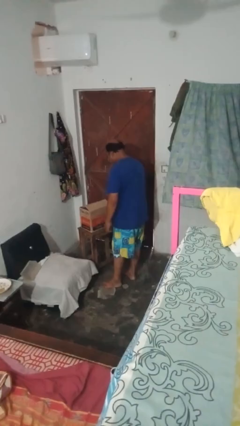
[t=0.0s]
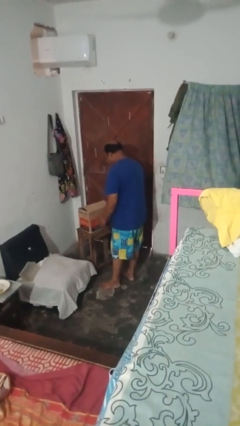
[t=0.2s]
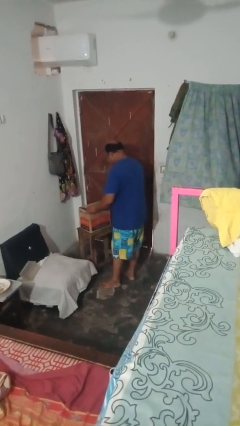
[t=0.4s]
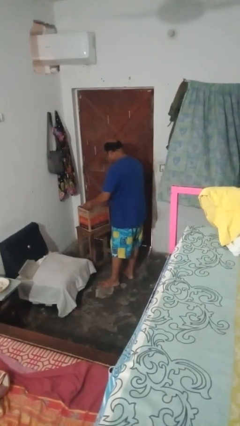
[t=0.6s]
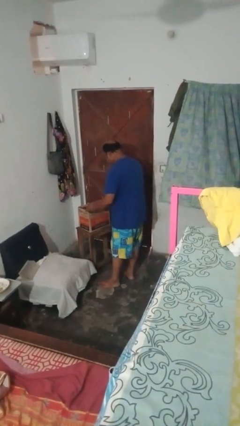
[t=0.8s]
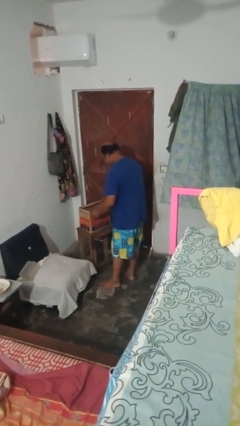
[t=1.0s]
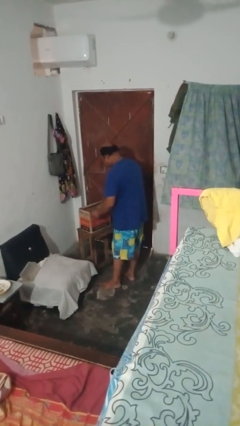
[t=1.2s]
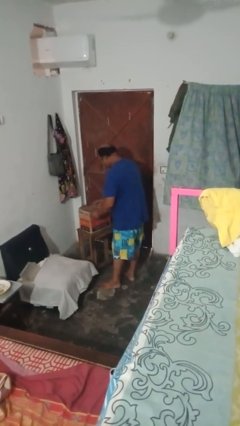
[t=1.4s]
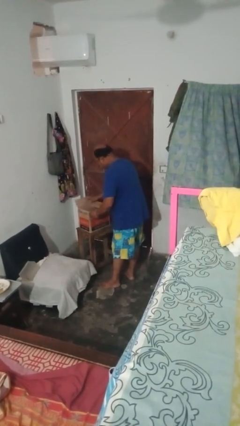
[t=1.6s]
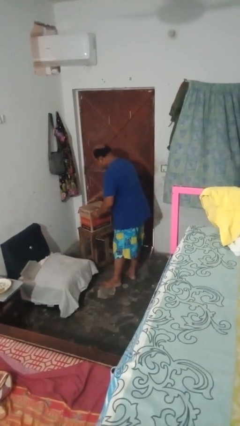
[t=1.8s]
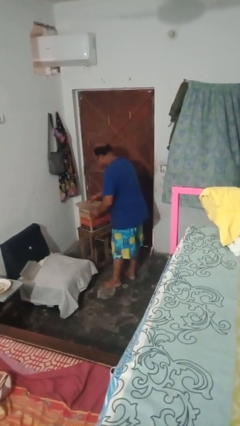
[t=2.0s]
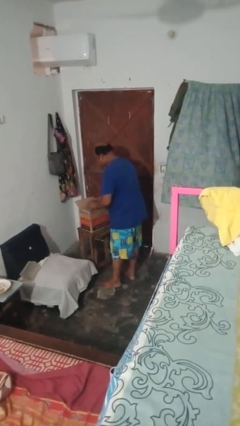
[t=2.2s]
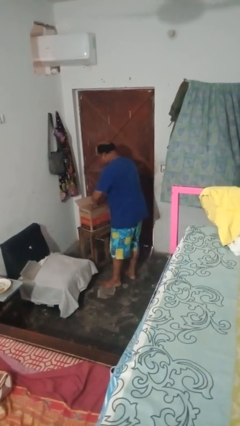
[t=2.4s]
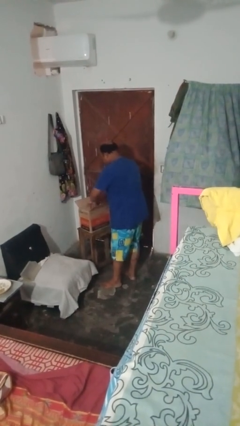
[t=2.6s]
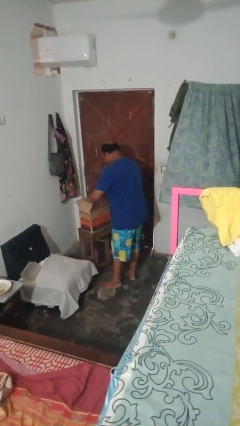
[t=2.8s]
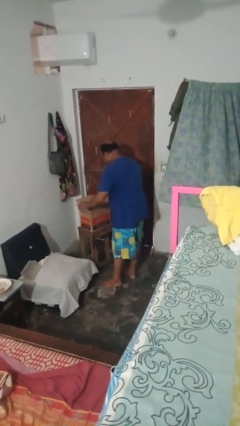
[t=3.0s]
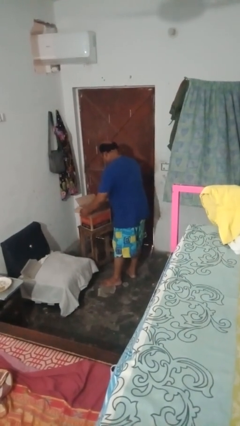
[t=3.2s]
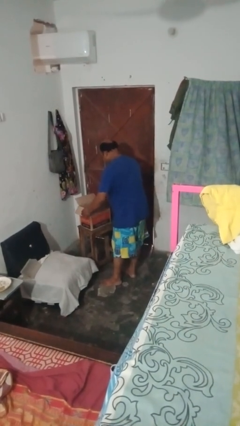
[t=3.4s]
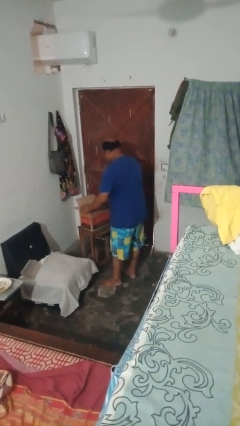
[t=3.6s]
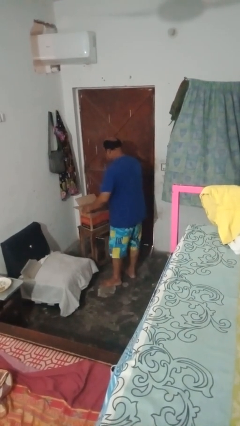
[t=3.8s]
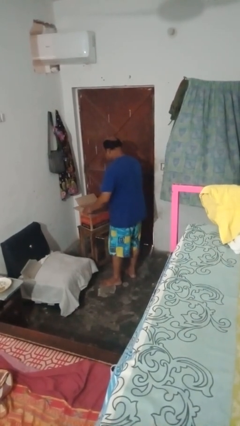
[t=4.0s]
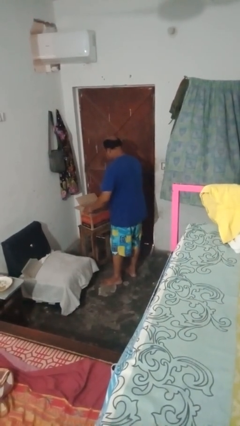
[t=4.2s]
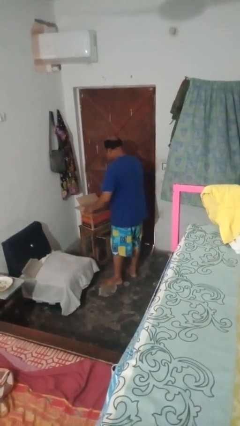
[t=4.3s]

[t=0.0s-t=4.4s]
person opens box

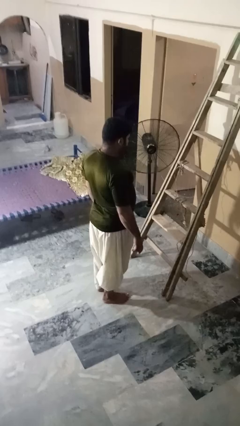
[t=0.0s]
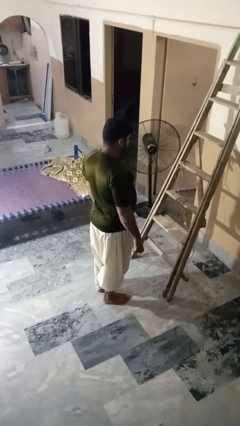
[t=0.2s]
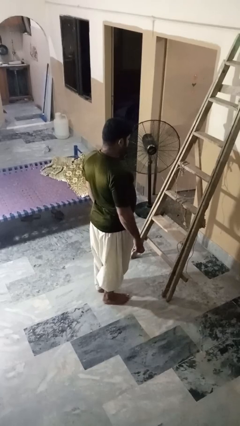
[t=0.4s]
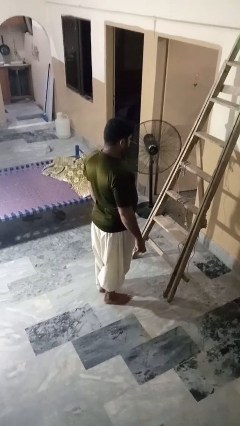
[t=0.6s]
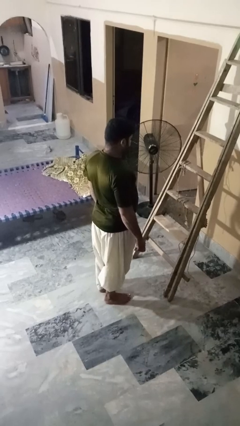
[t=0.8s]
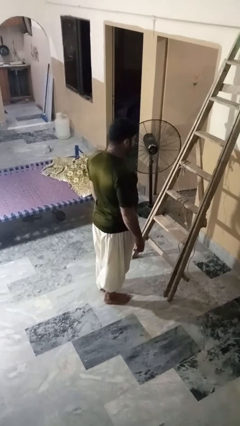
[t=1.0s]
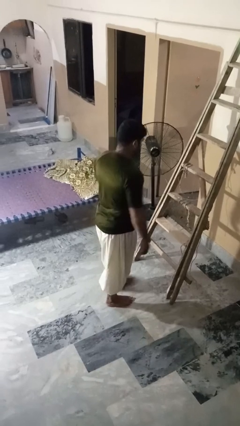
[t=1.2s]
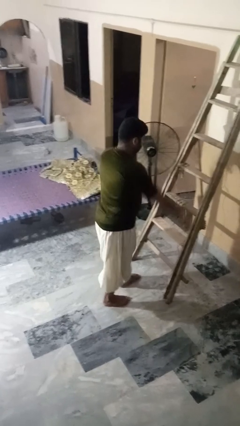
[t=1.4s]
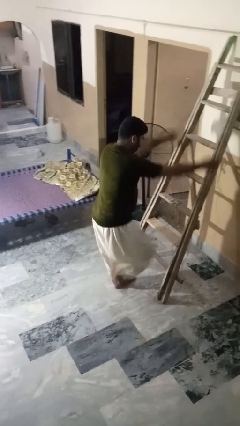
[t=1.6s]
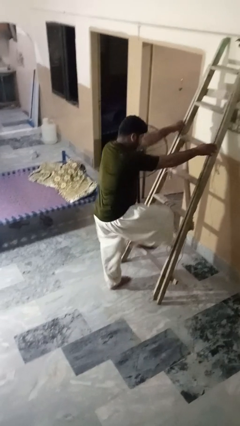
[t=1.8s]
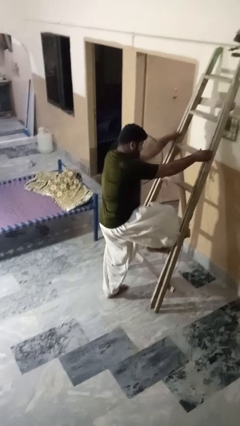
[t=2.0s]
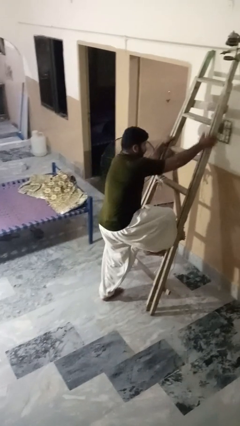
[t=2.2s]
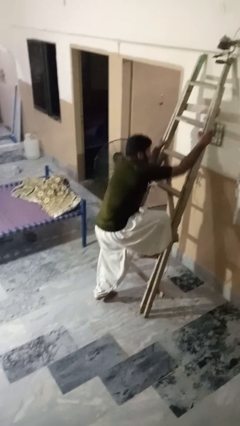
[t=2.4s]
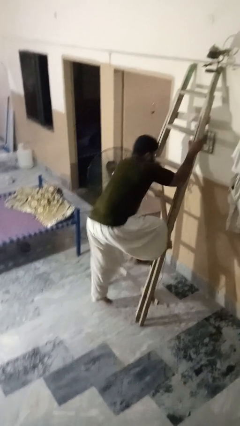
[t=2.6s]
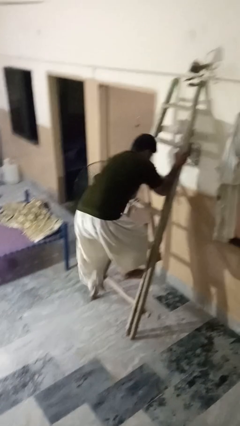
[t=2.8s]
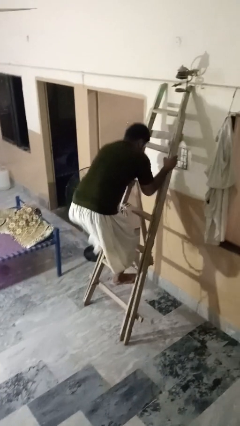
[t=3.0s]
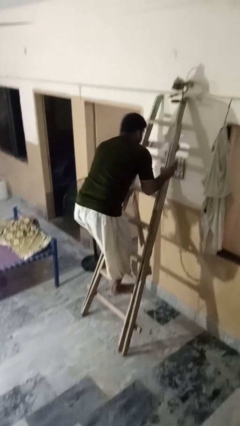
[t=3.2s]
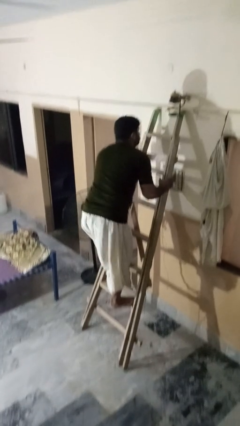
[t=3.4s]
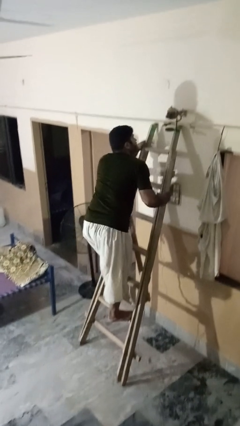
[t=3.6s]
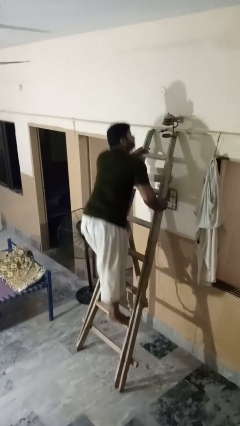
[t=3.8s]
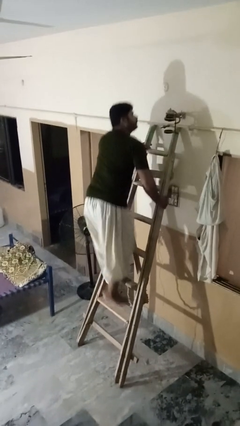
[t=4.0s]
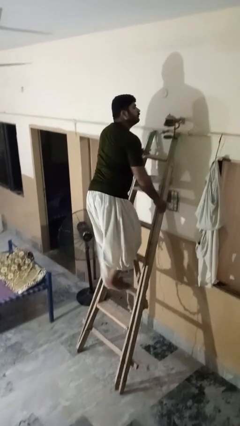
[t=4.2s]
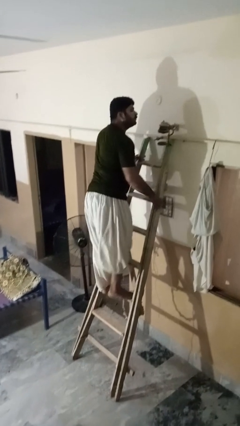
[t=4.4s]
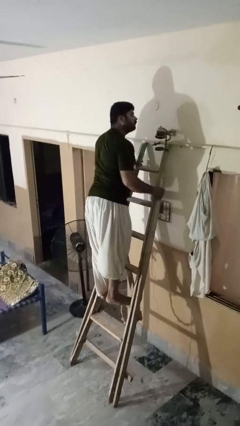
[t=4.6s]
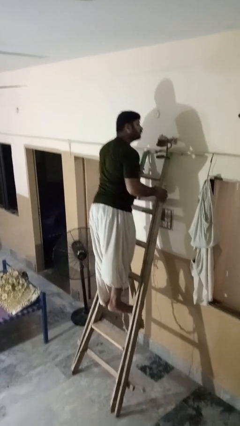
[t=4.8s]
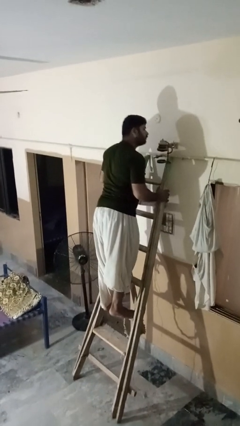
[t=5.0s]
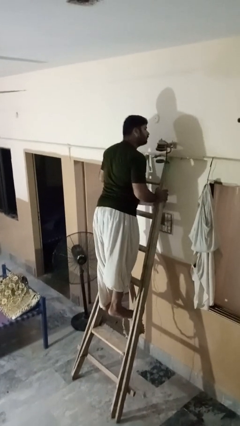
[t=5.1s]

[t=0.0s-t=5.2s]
person climbs up ladder

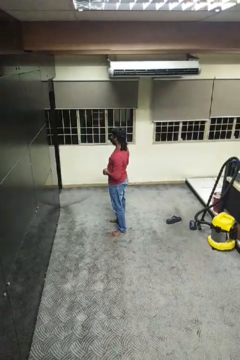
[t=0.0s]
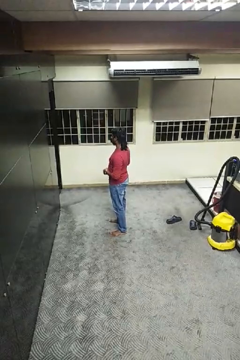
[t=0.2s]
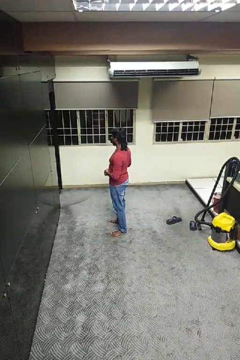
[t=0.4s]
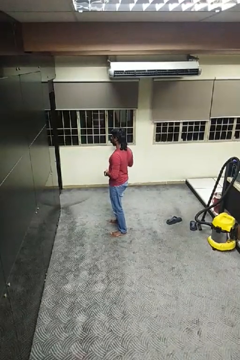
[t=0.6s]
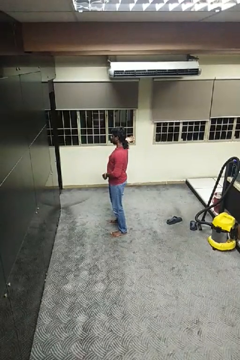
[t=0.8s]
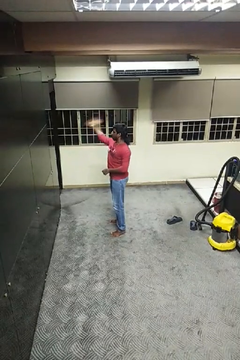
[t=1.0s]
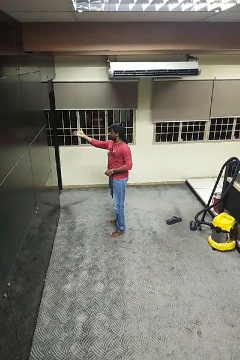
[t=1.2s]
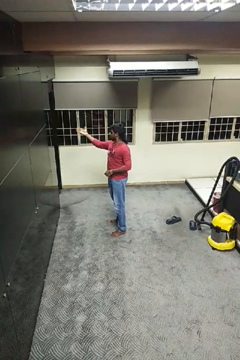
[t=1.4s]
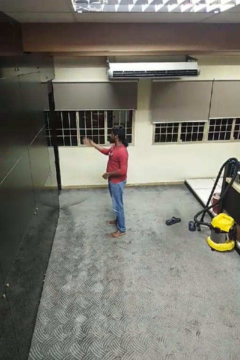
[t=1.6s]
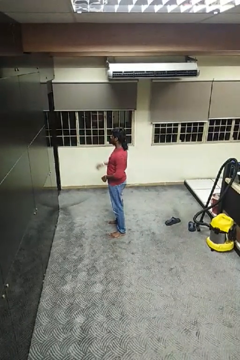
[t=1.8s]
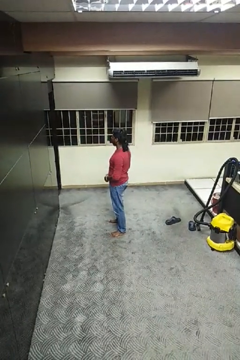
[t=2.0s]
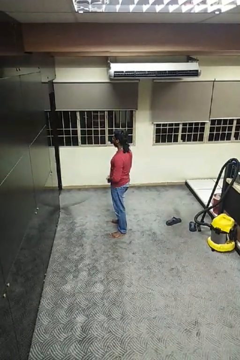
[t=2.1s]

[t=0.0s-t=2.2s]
person karate chop

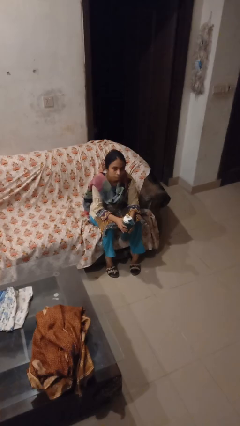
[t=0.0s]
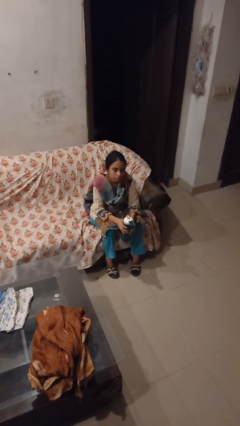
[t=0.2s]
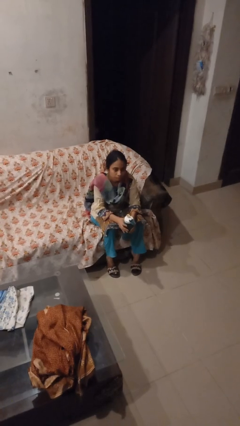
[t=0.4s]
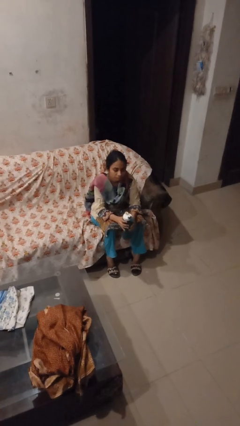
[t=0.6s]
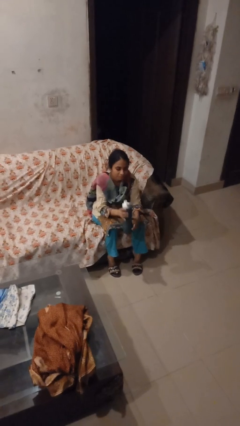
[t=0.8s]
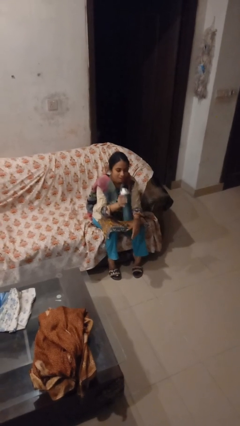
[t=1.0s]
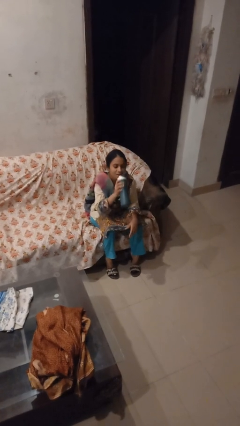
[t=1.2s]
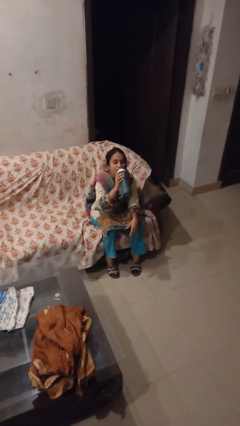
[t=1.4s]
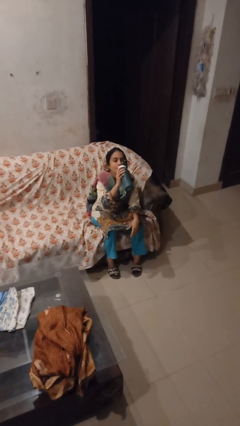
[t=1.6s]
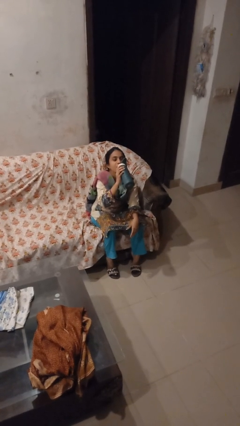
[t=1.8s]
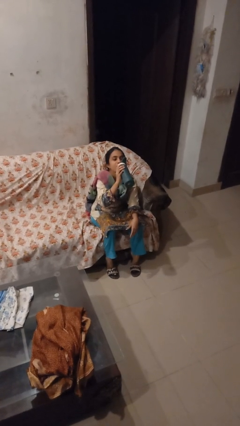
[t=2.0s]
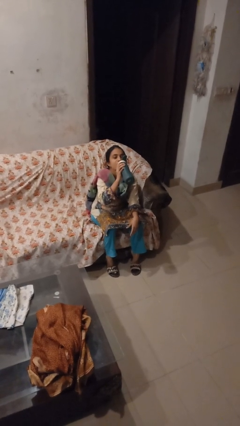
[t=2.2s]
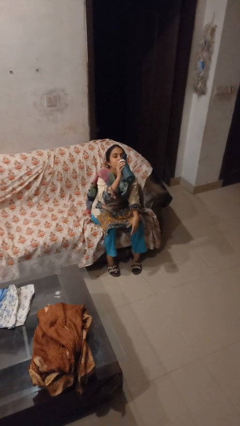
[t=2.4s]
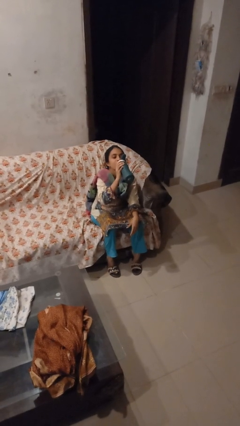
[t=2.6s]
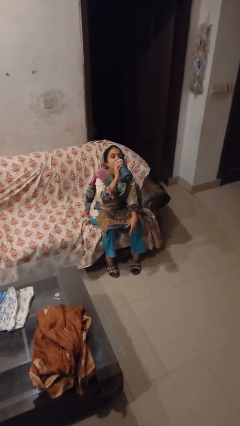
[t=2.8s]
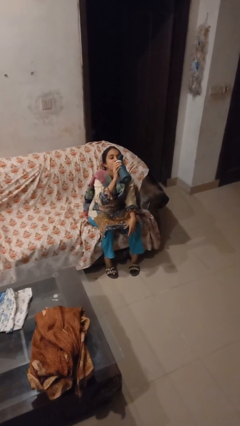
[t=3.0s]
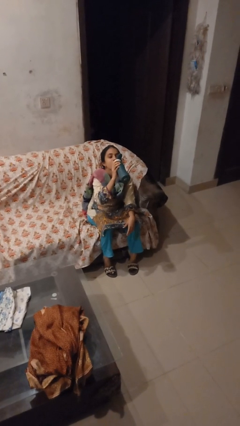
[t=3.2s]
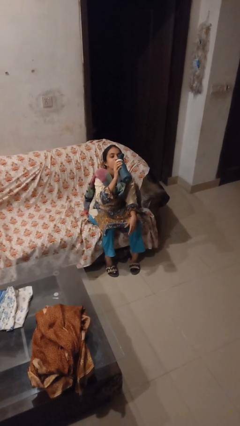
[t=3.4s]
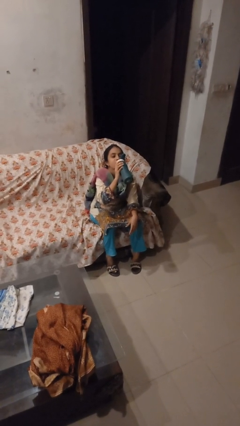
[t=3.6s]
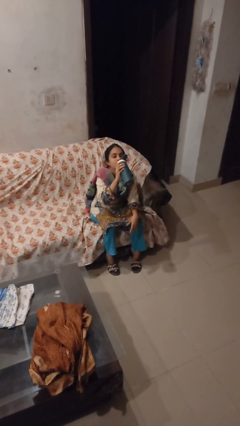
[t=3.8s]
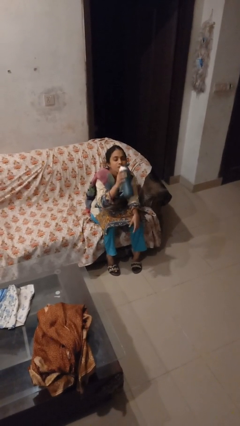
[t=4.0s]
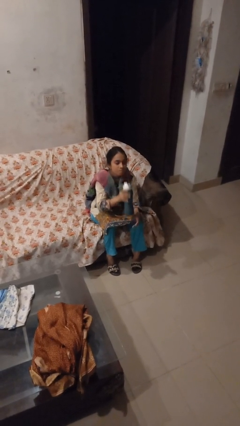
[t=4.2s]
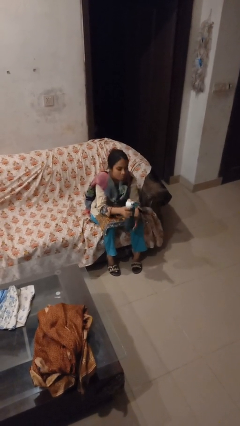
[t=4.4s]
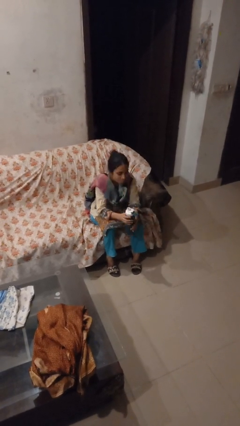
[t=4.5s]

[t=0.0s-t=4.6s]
person drinks from bottle

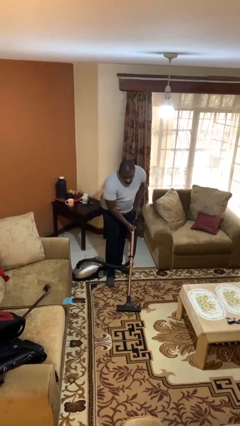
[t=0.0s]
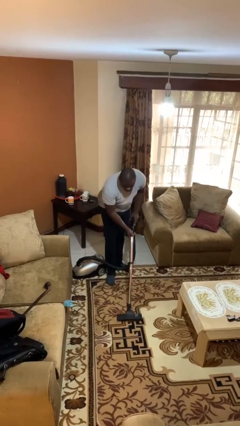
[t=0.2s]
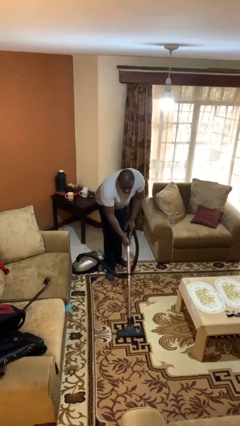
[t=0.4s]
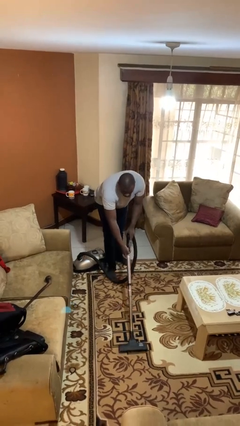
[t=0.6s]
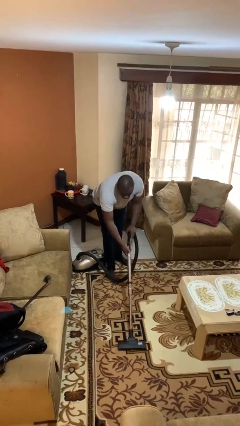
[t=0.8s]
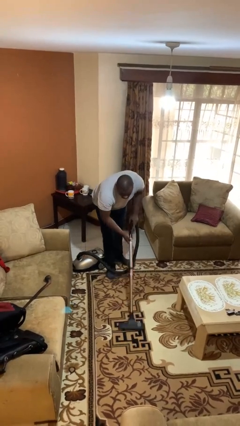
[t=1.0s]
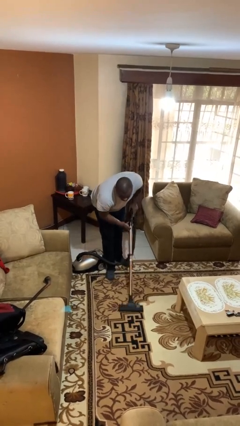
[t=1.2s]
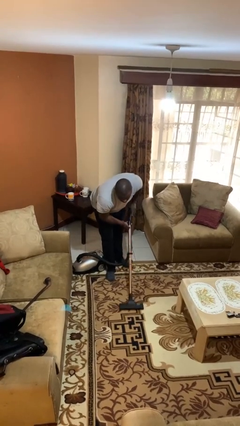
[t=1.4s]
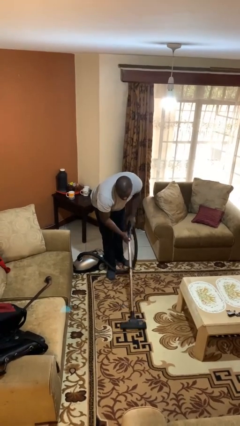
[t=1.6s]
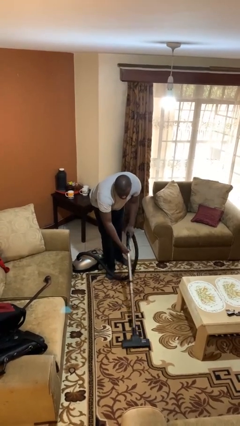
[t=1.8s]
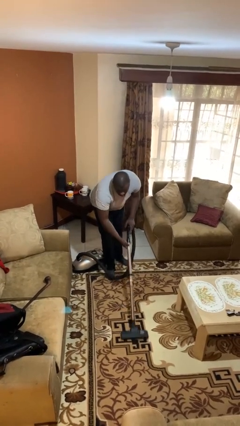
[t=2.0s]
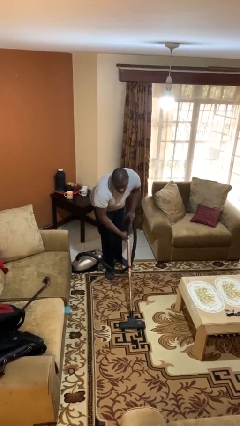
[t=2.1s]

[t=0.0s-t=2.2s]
person vacuums carpet
